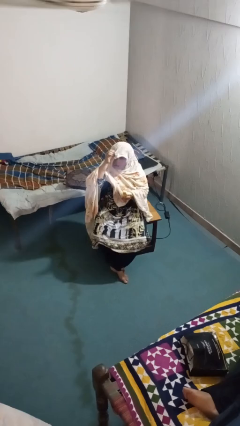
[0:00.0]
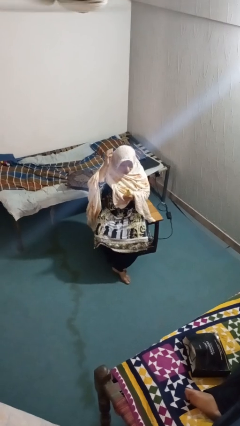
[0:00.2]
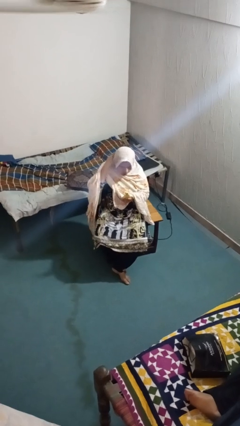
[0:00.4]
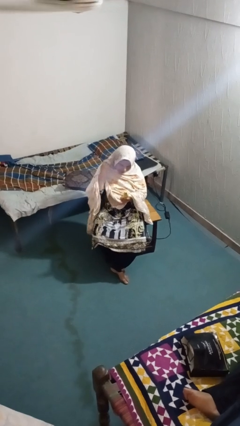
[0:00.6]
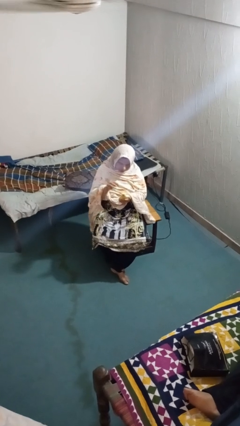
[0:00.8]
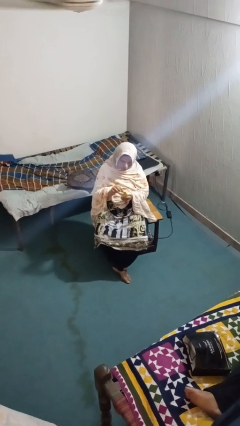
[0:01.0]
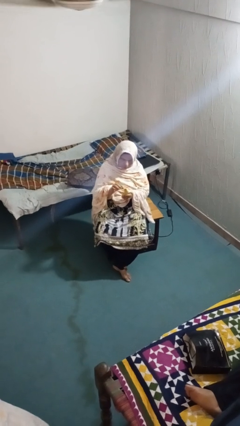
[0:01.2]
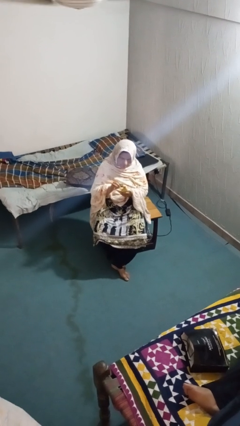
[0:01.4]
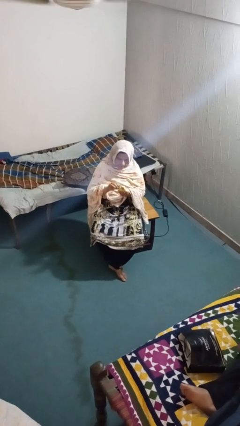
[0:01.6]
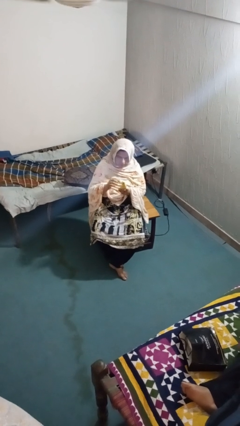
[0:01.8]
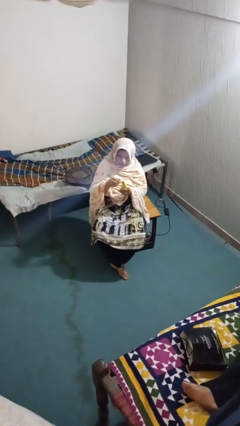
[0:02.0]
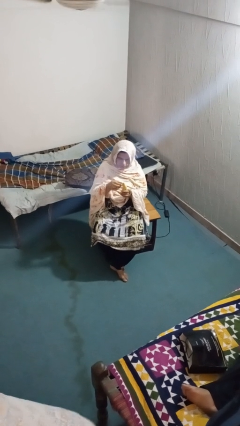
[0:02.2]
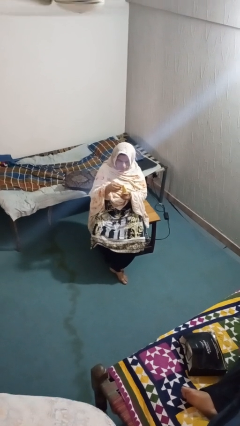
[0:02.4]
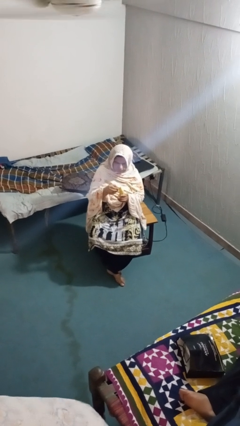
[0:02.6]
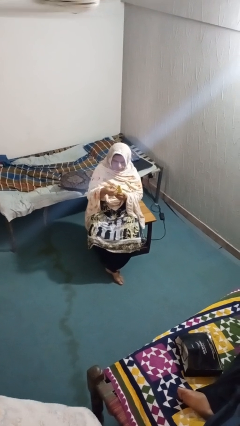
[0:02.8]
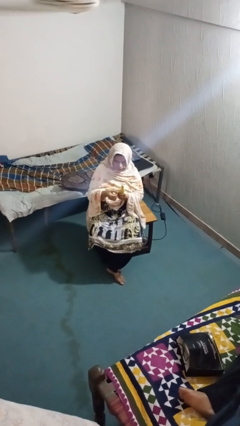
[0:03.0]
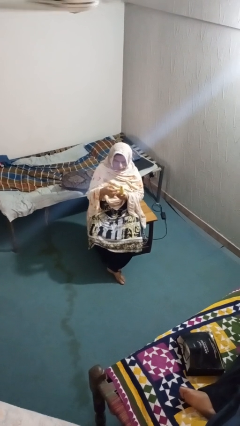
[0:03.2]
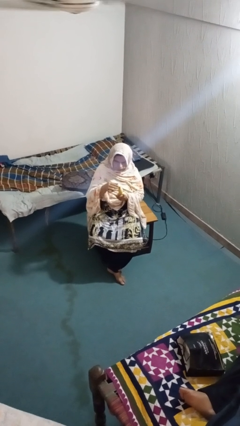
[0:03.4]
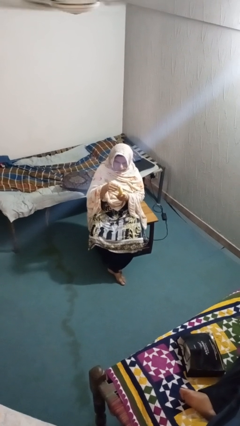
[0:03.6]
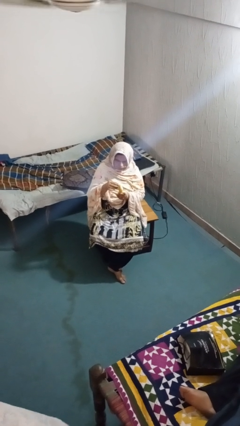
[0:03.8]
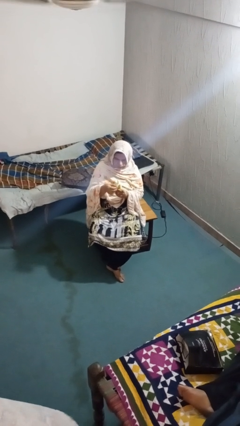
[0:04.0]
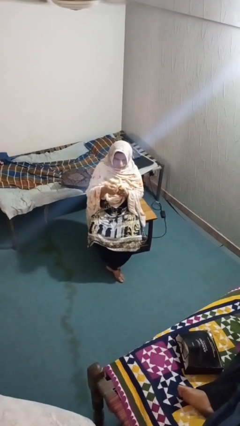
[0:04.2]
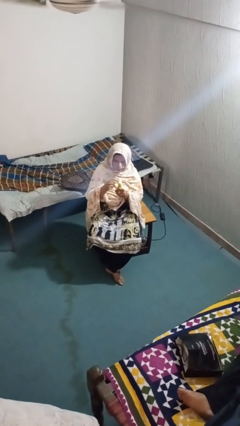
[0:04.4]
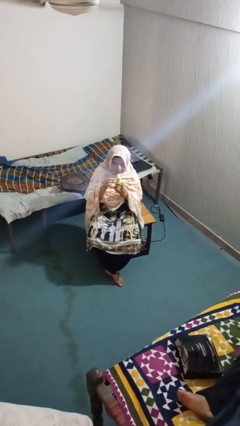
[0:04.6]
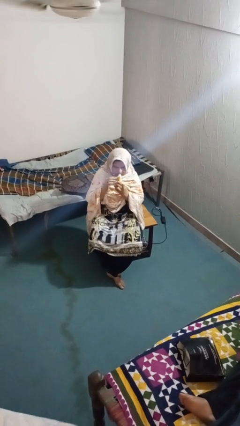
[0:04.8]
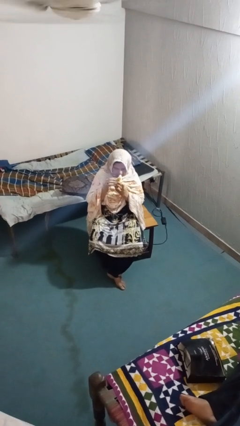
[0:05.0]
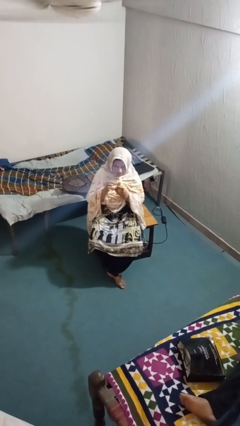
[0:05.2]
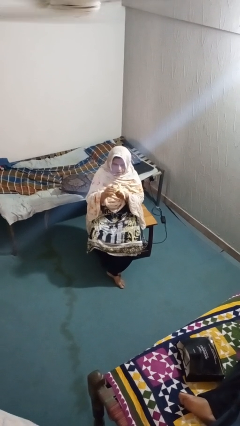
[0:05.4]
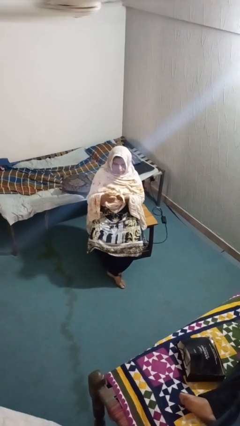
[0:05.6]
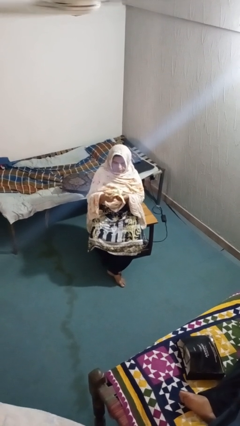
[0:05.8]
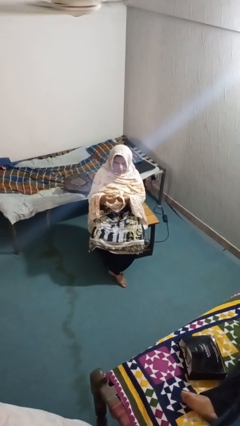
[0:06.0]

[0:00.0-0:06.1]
person eats banana

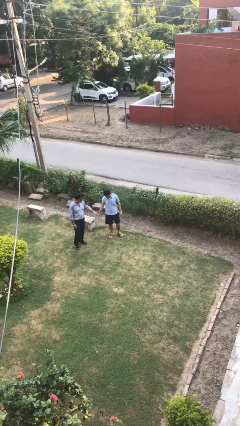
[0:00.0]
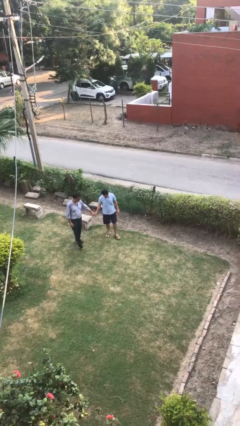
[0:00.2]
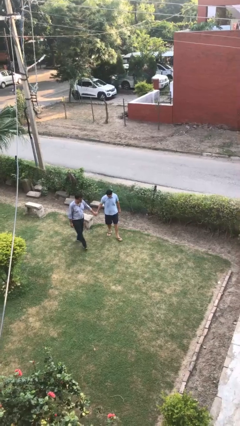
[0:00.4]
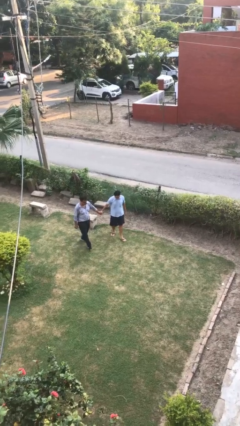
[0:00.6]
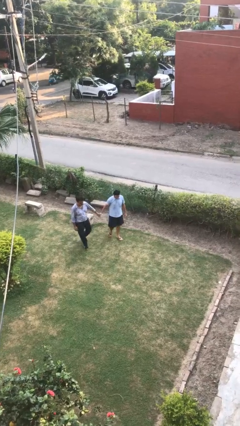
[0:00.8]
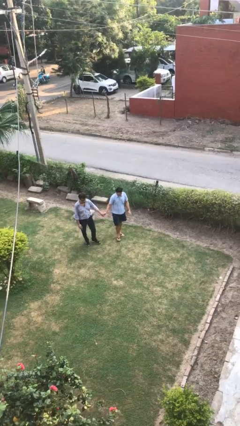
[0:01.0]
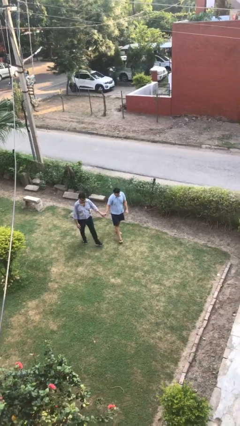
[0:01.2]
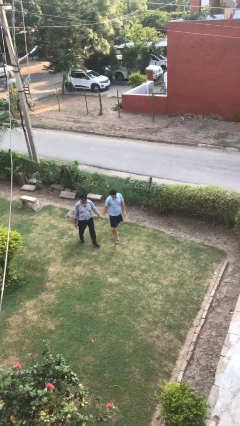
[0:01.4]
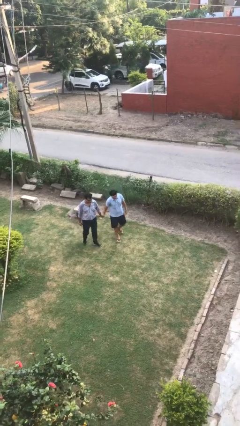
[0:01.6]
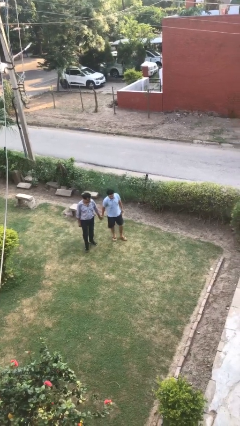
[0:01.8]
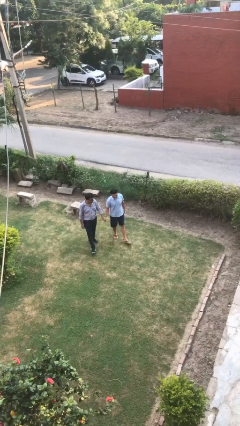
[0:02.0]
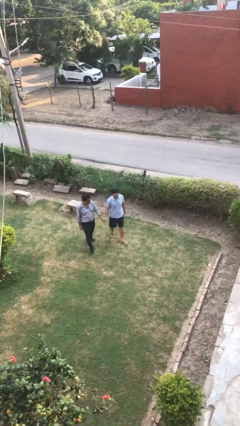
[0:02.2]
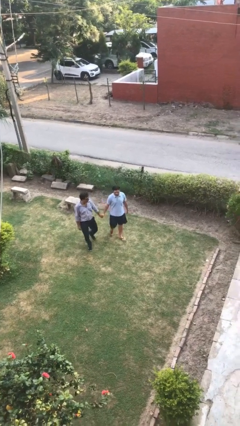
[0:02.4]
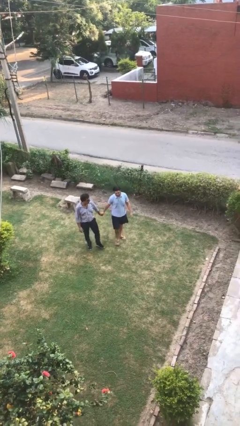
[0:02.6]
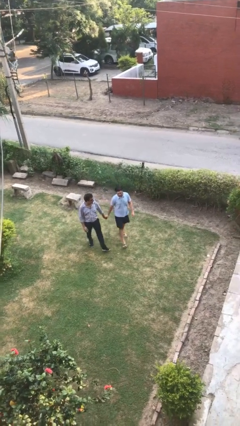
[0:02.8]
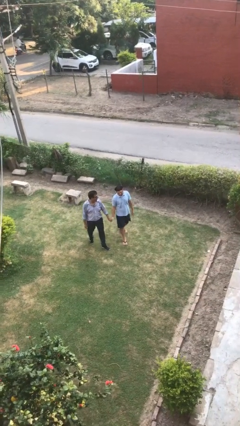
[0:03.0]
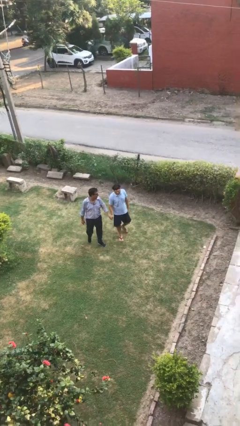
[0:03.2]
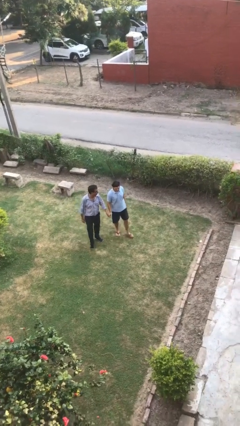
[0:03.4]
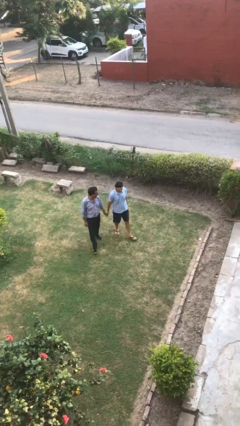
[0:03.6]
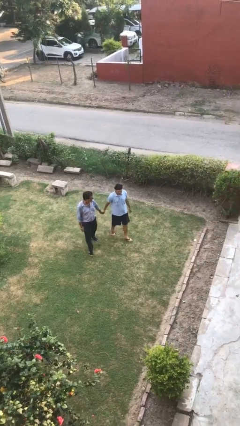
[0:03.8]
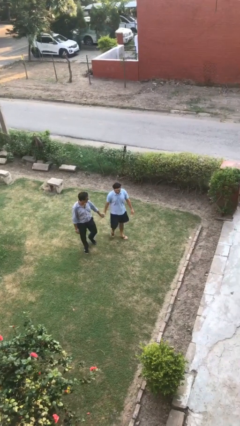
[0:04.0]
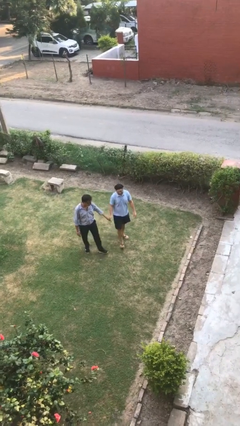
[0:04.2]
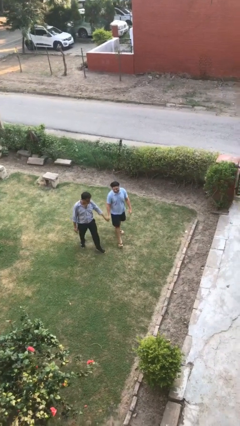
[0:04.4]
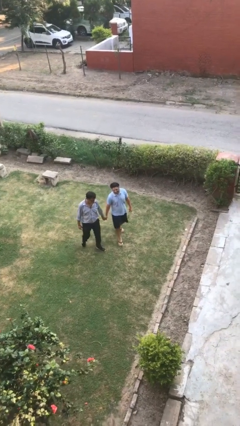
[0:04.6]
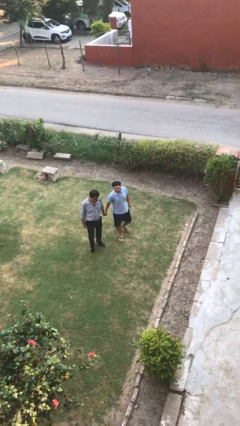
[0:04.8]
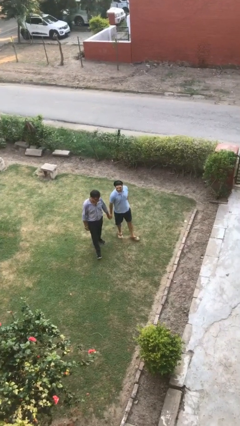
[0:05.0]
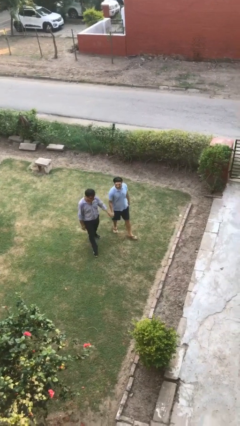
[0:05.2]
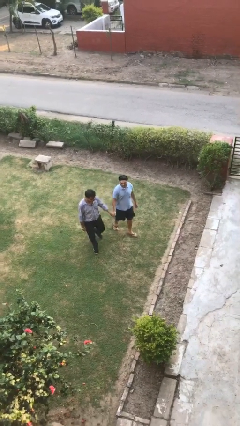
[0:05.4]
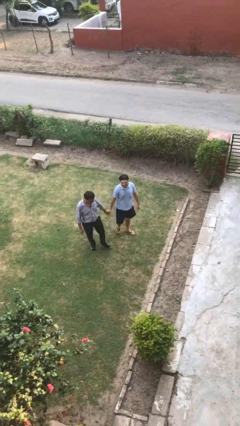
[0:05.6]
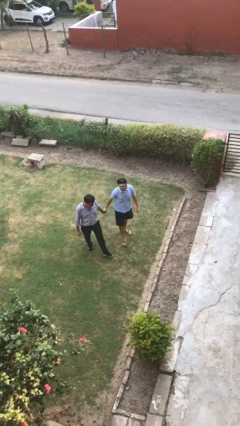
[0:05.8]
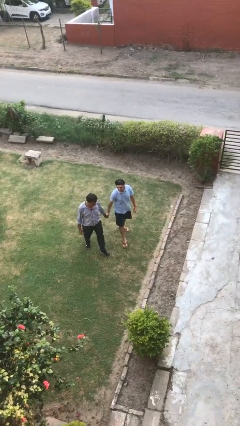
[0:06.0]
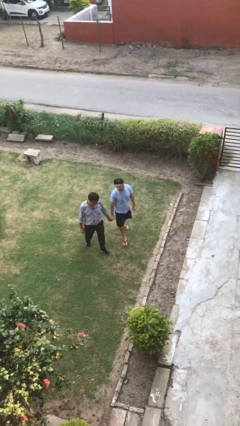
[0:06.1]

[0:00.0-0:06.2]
person holds hand

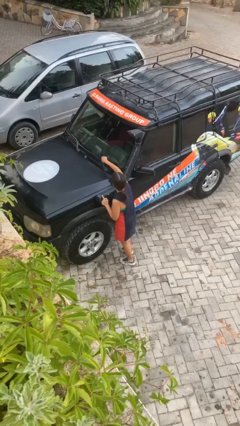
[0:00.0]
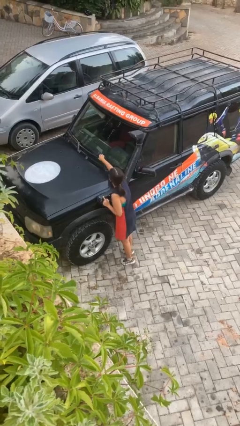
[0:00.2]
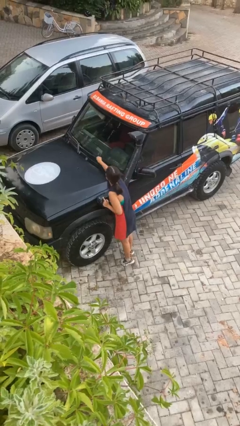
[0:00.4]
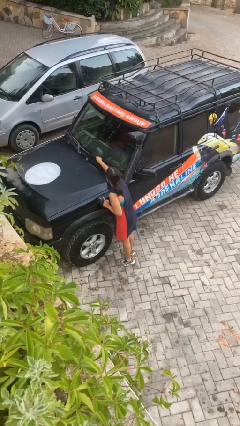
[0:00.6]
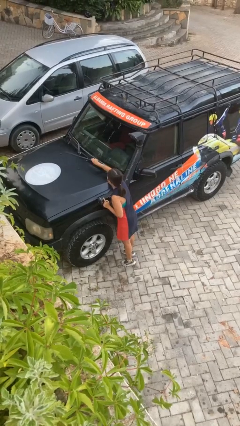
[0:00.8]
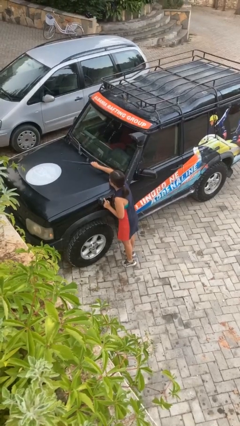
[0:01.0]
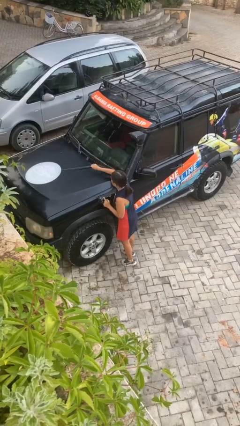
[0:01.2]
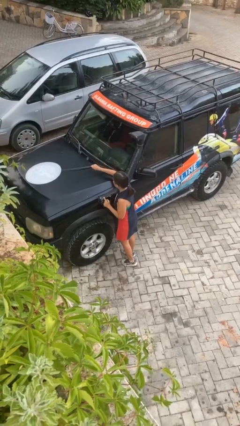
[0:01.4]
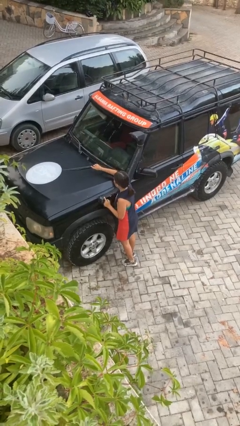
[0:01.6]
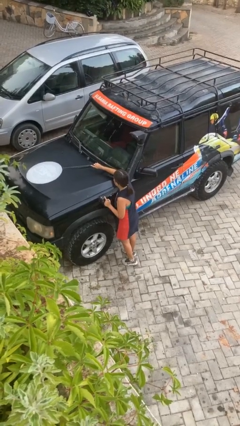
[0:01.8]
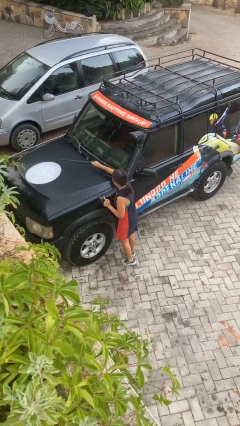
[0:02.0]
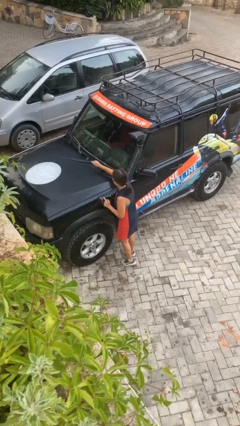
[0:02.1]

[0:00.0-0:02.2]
person flips up car wipers

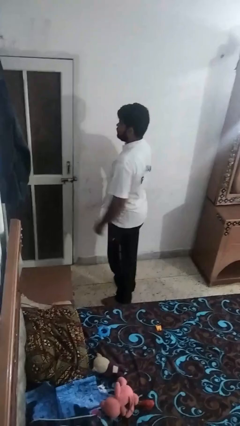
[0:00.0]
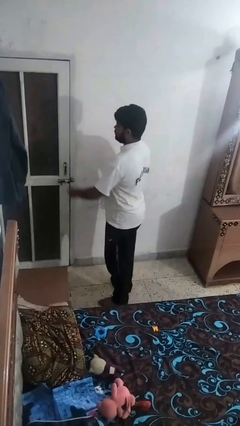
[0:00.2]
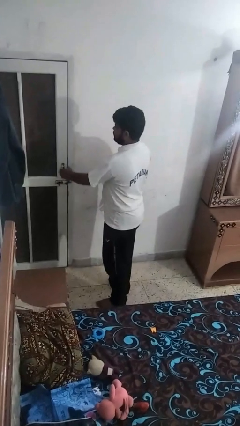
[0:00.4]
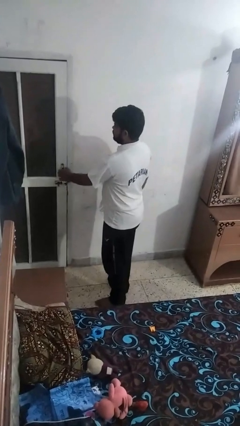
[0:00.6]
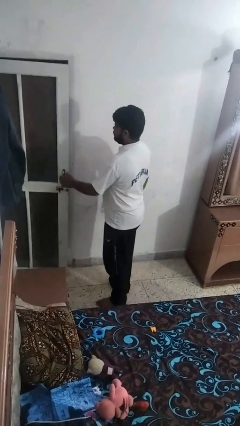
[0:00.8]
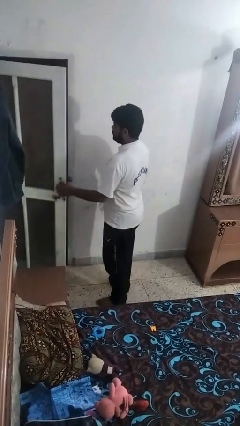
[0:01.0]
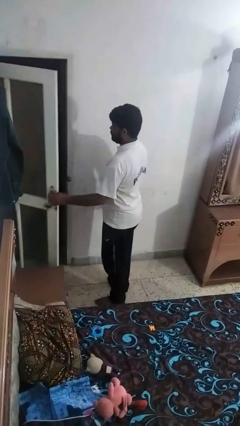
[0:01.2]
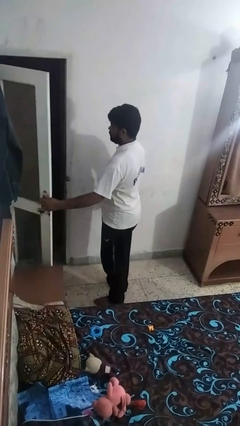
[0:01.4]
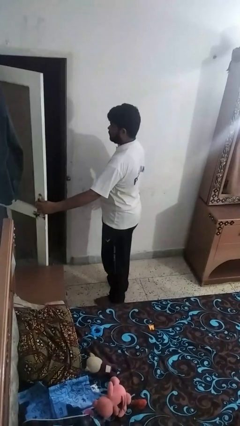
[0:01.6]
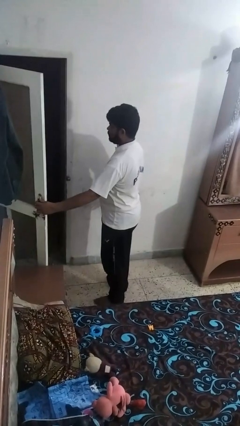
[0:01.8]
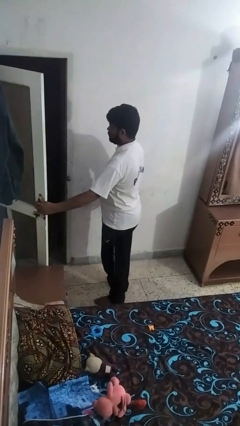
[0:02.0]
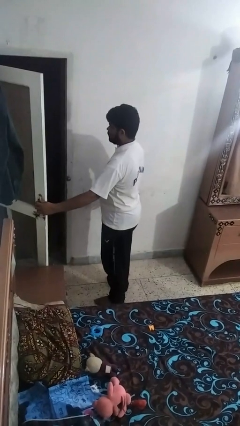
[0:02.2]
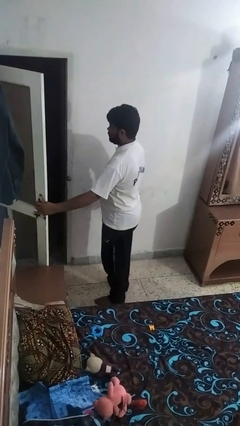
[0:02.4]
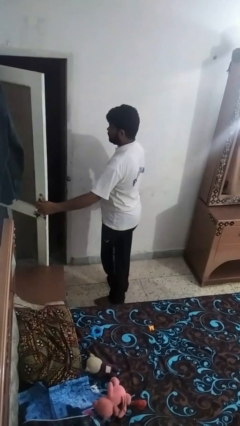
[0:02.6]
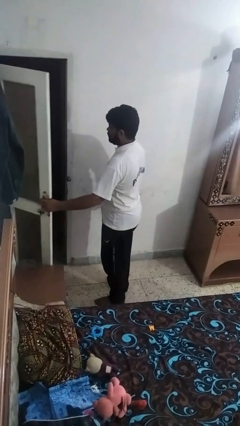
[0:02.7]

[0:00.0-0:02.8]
person opens gate

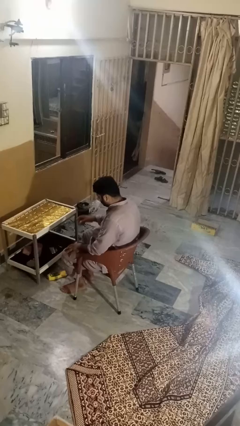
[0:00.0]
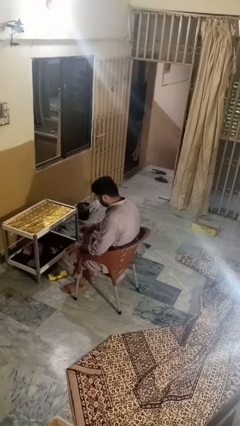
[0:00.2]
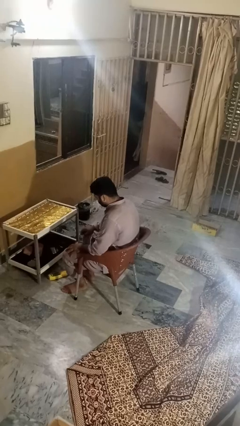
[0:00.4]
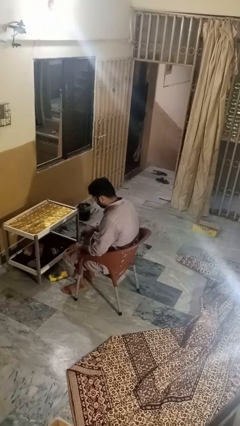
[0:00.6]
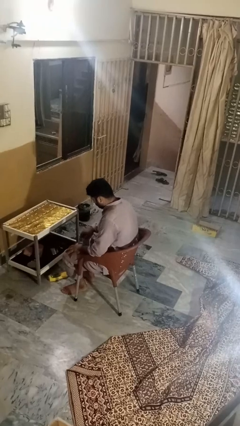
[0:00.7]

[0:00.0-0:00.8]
person throws object to ground
